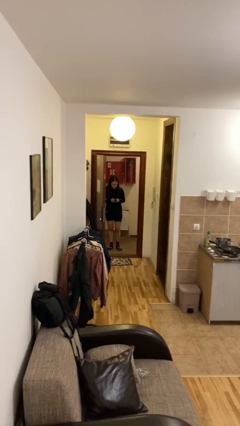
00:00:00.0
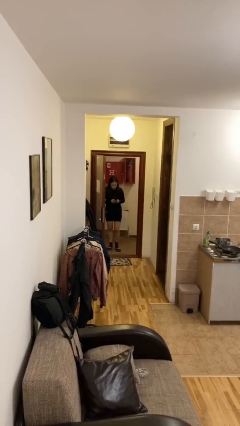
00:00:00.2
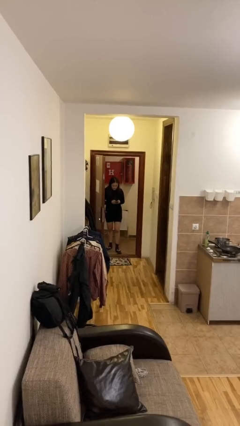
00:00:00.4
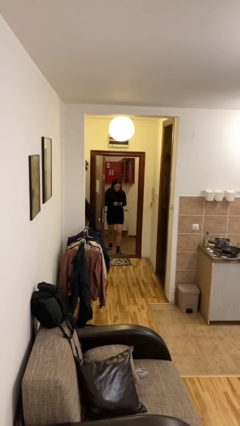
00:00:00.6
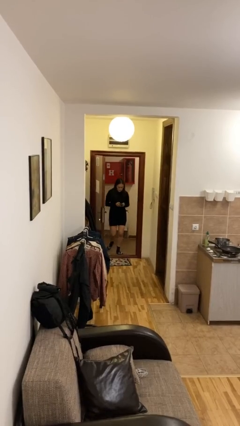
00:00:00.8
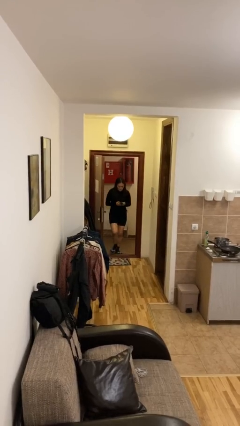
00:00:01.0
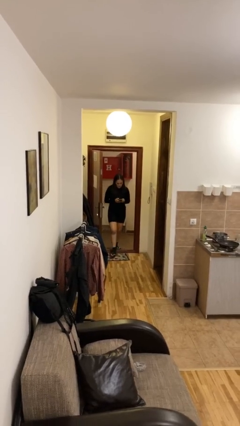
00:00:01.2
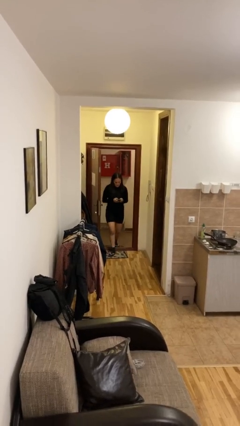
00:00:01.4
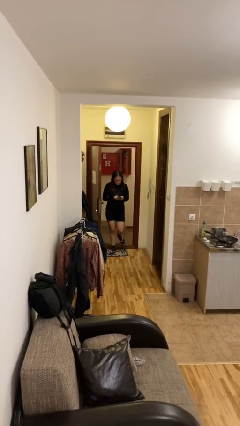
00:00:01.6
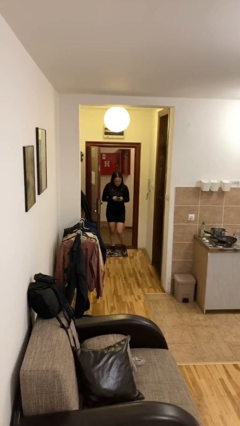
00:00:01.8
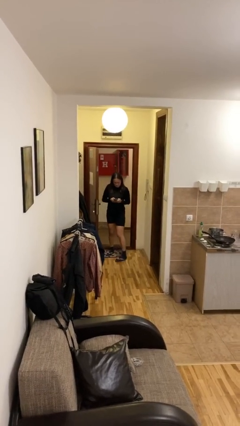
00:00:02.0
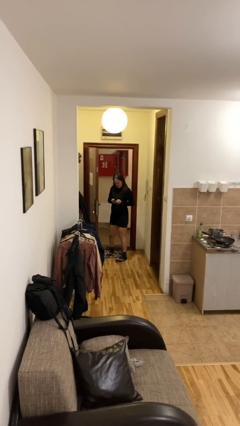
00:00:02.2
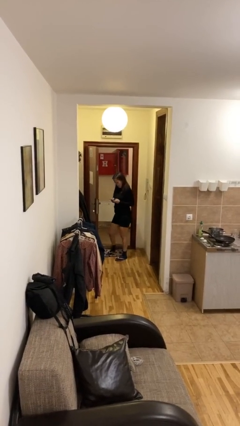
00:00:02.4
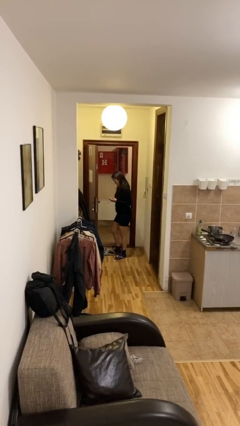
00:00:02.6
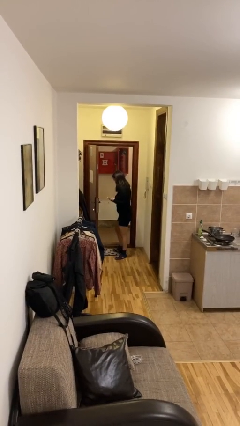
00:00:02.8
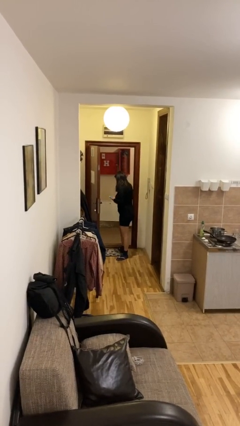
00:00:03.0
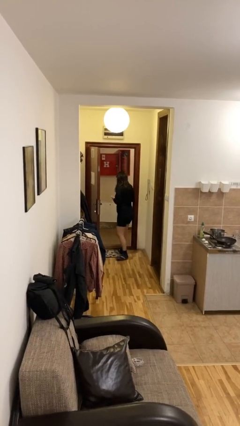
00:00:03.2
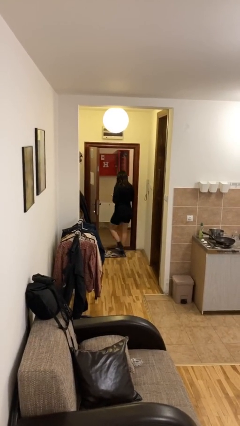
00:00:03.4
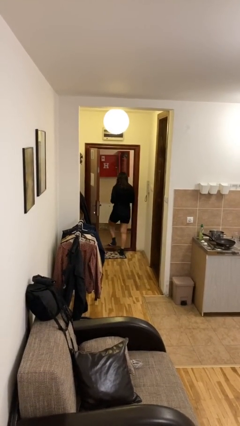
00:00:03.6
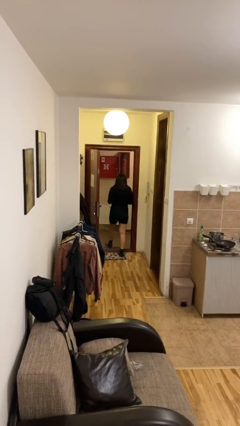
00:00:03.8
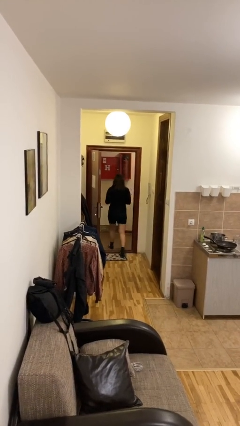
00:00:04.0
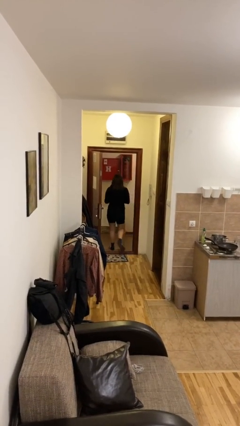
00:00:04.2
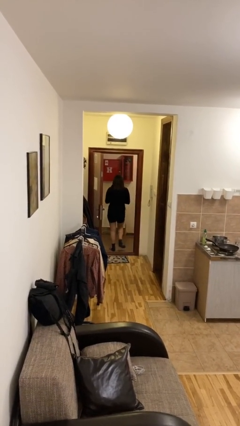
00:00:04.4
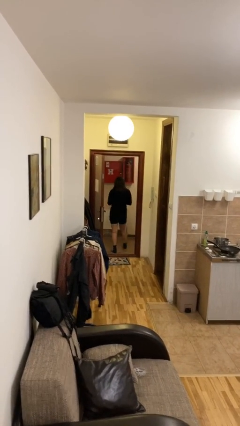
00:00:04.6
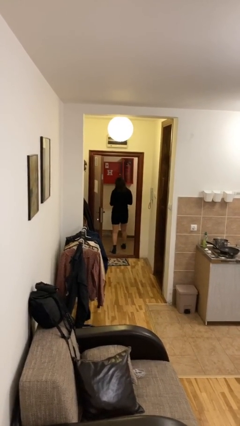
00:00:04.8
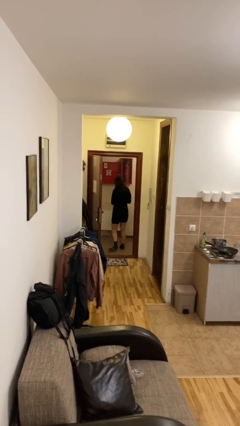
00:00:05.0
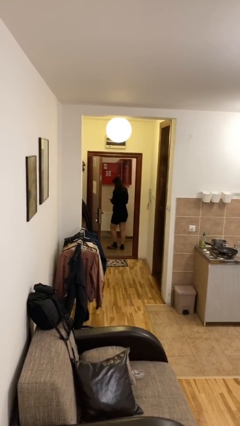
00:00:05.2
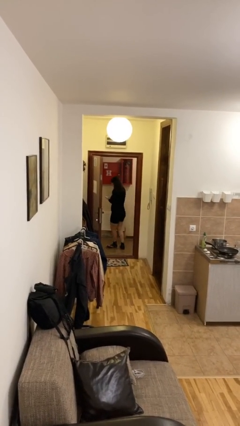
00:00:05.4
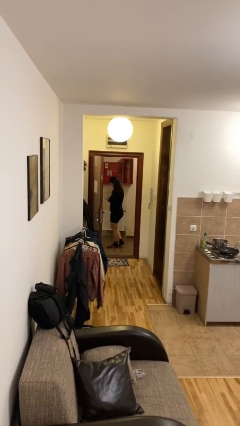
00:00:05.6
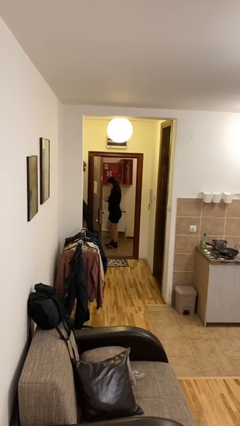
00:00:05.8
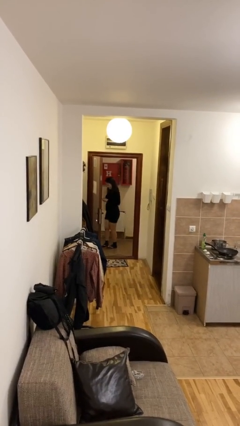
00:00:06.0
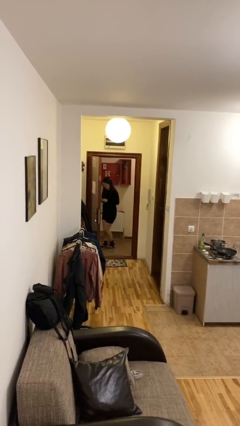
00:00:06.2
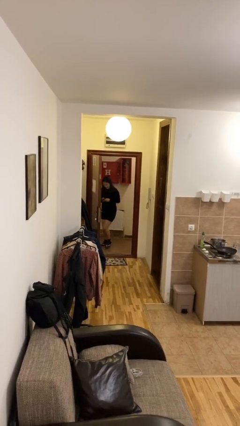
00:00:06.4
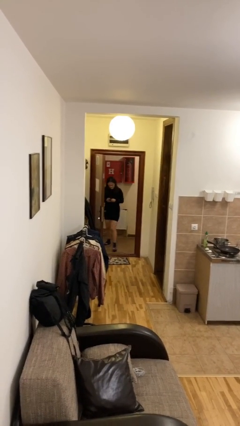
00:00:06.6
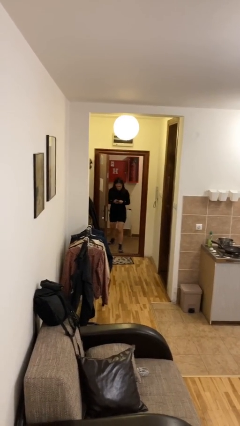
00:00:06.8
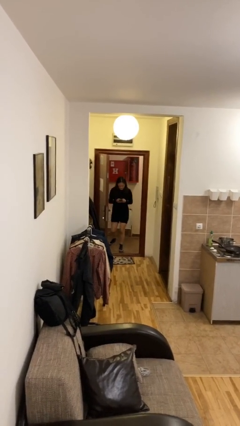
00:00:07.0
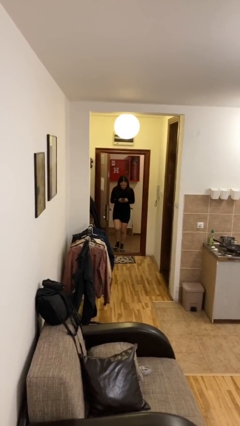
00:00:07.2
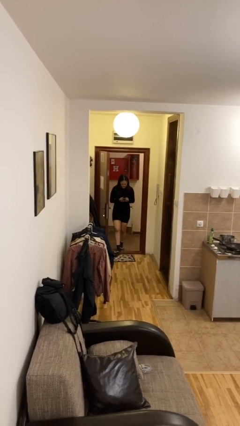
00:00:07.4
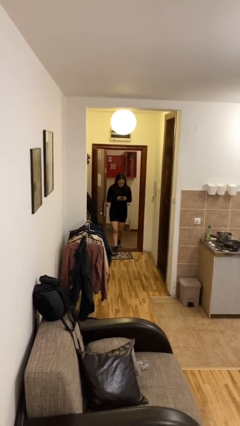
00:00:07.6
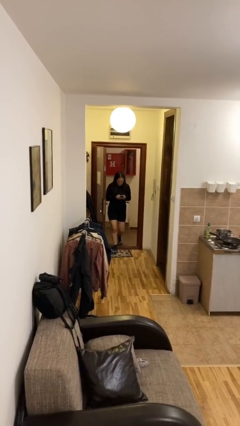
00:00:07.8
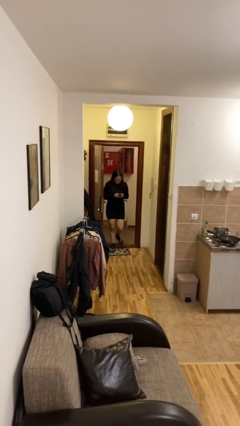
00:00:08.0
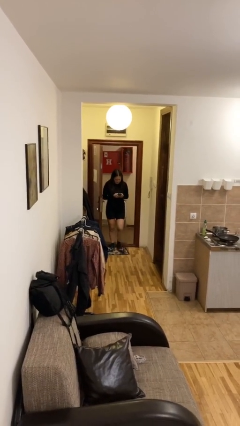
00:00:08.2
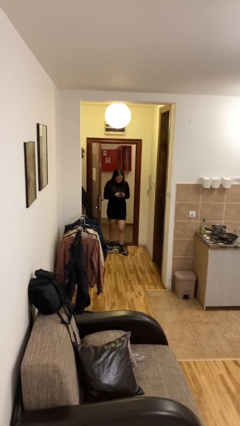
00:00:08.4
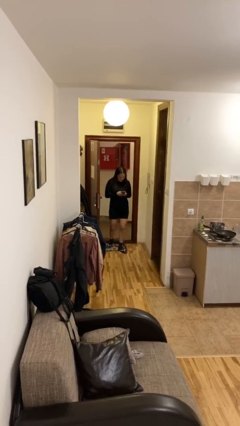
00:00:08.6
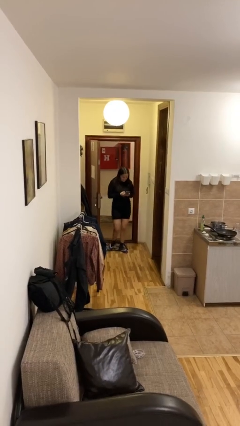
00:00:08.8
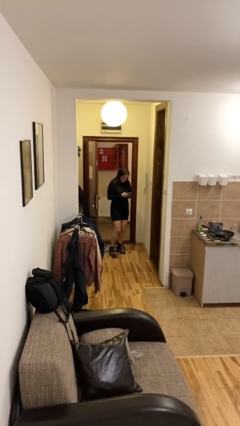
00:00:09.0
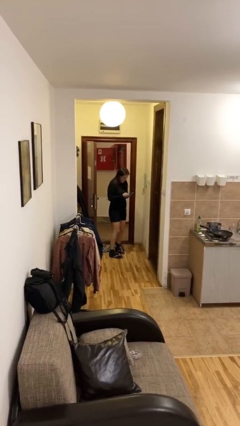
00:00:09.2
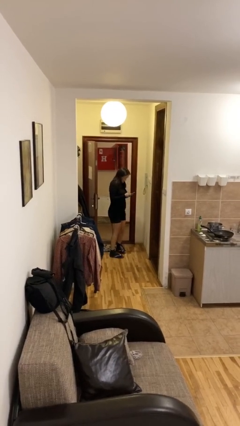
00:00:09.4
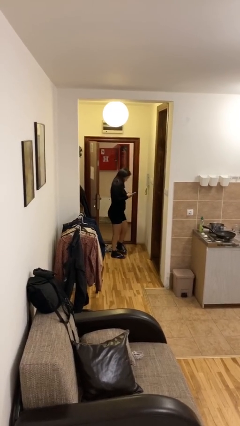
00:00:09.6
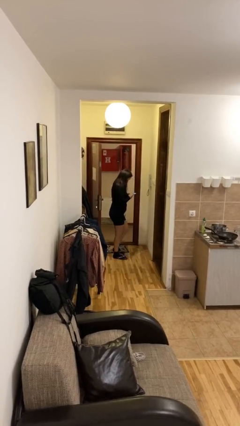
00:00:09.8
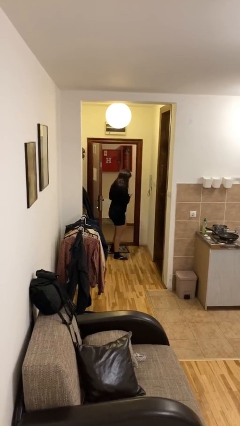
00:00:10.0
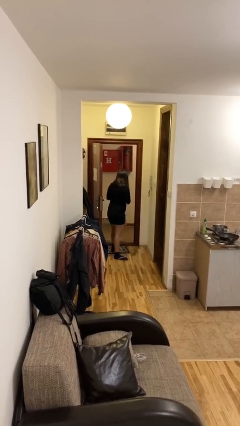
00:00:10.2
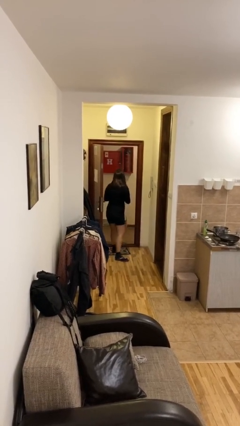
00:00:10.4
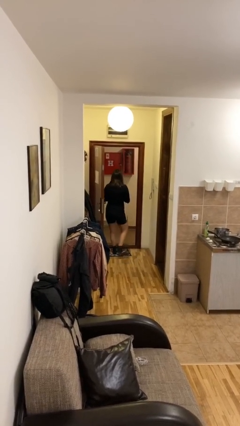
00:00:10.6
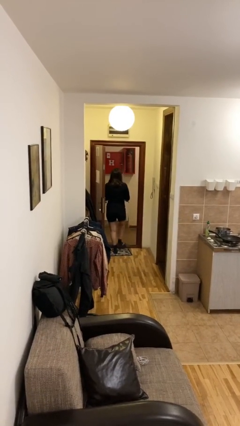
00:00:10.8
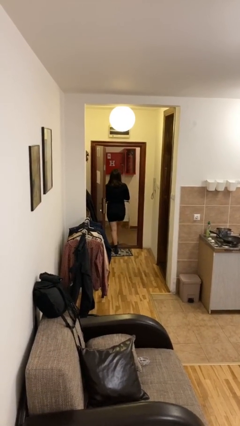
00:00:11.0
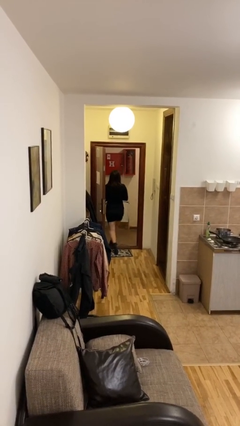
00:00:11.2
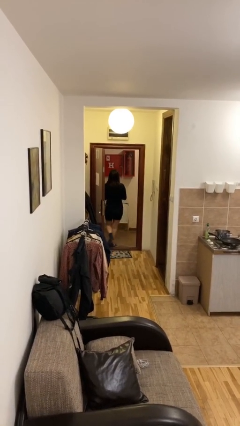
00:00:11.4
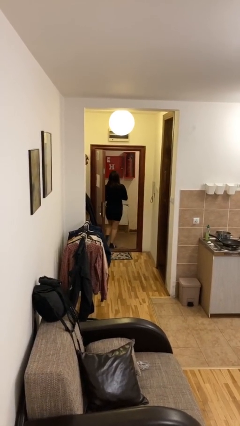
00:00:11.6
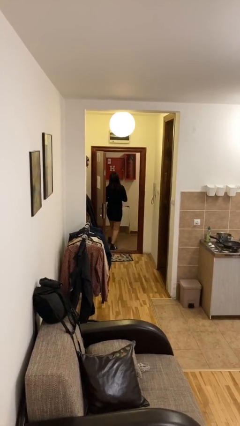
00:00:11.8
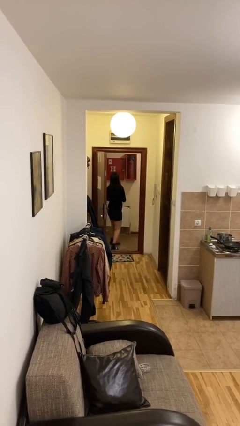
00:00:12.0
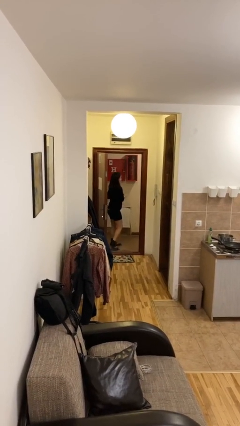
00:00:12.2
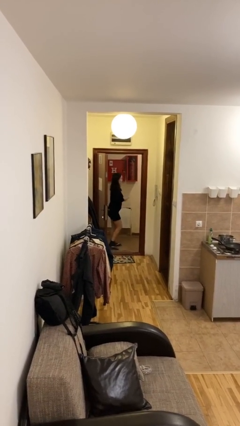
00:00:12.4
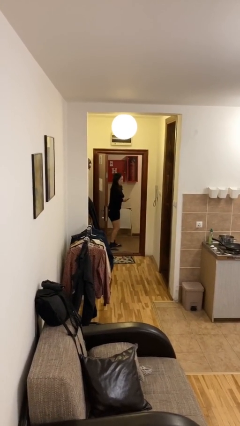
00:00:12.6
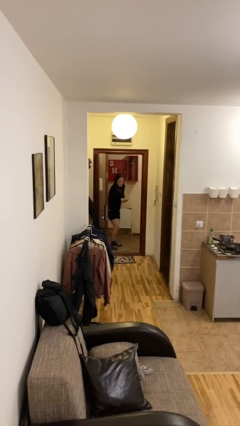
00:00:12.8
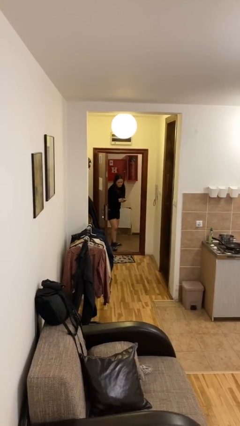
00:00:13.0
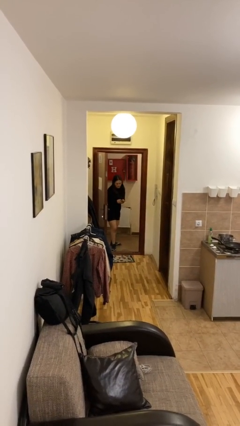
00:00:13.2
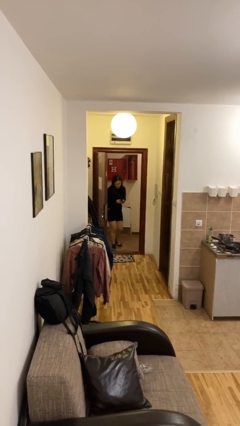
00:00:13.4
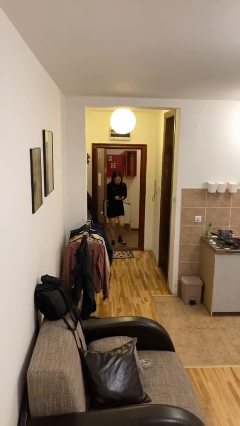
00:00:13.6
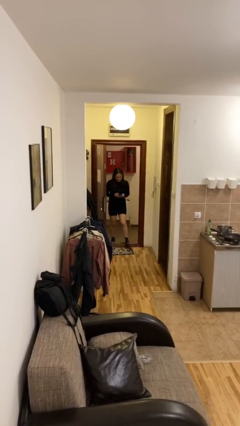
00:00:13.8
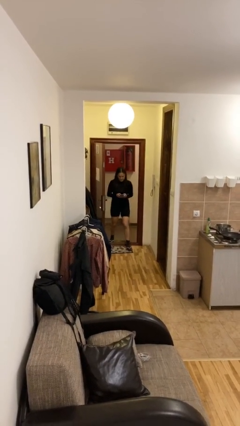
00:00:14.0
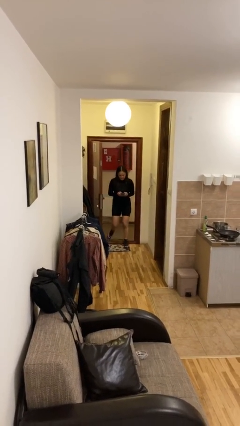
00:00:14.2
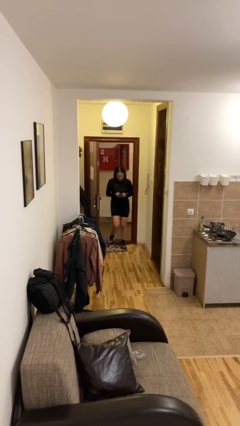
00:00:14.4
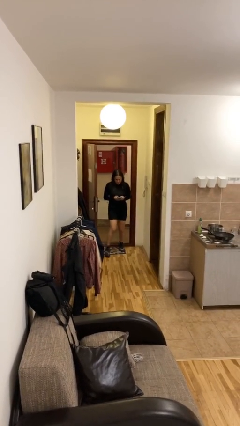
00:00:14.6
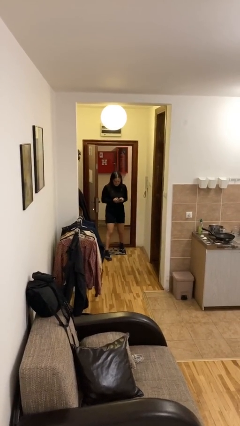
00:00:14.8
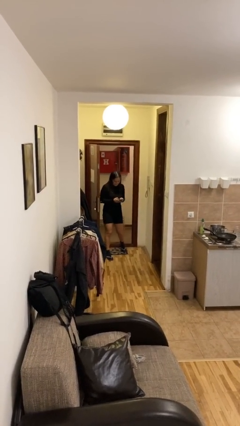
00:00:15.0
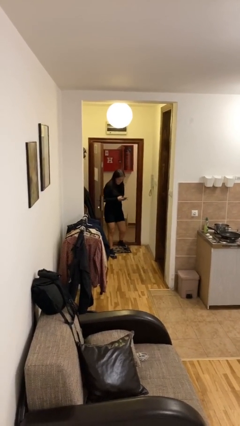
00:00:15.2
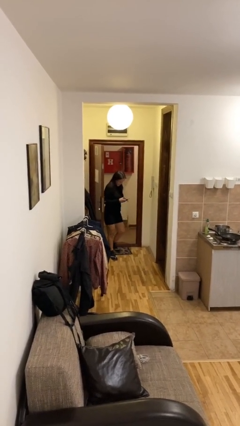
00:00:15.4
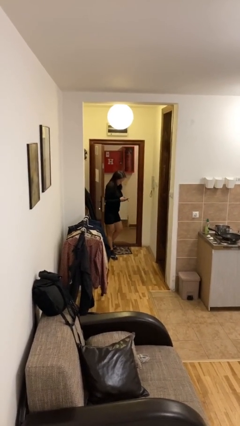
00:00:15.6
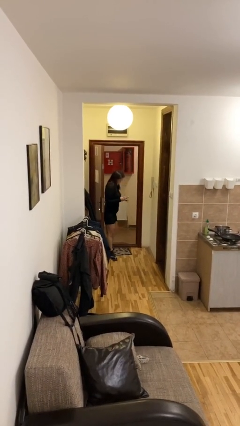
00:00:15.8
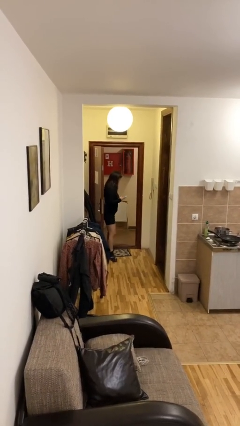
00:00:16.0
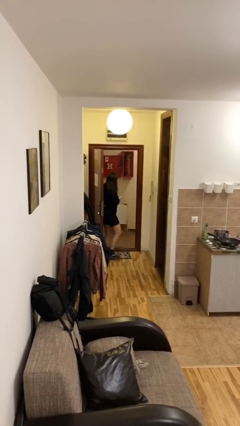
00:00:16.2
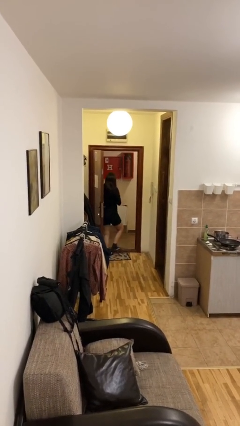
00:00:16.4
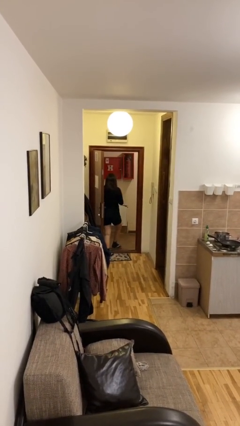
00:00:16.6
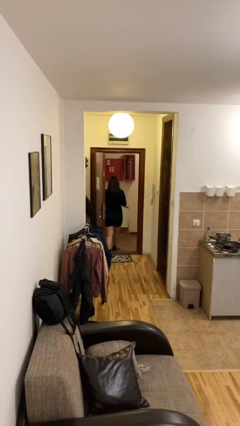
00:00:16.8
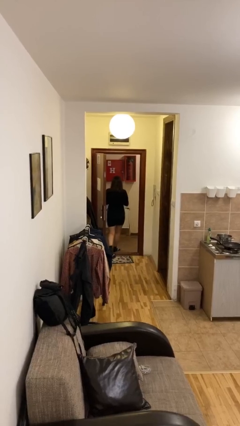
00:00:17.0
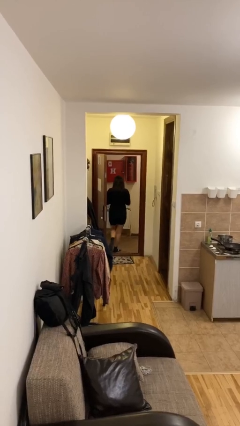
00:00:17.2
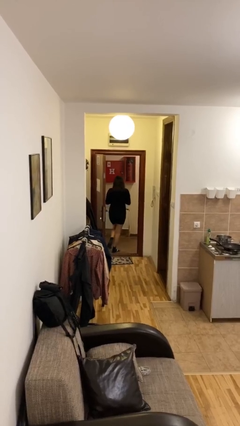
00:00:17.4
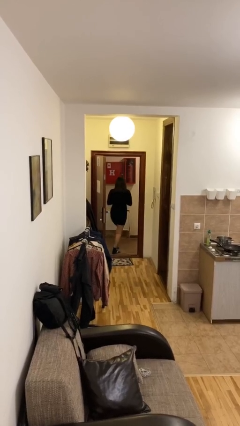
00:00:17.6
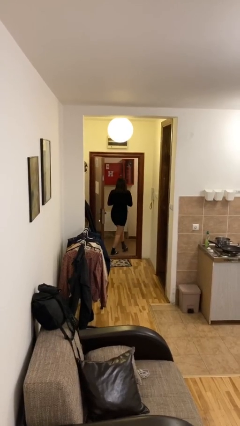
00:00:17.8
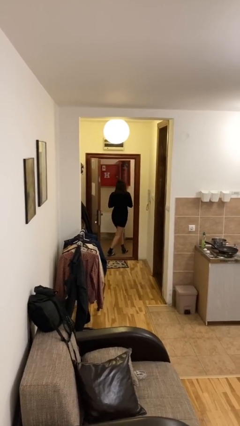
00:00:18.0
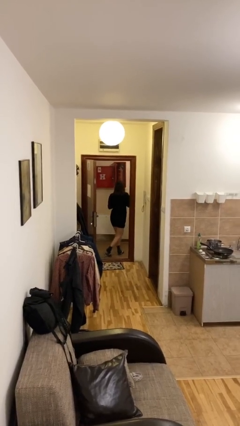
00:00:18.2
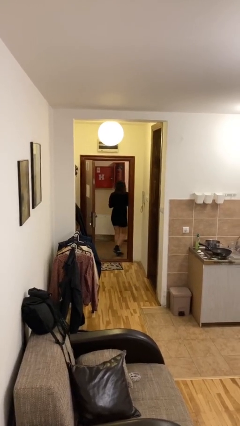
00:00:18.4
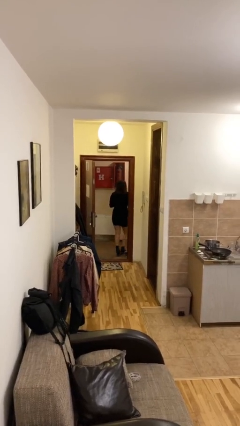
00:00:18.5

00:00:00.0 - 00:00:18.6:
person texts on phone
